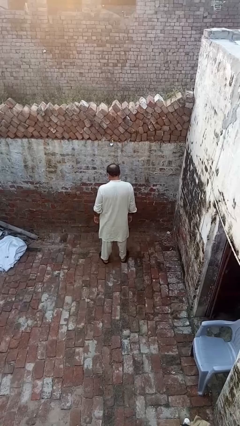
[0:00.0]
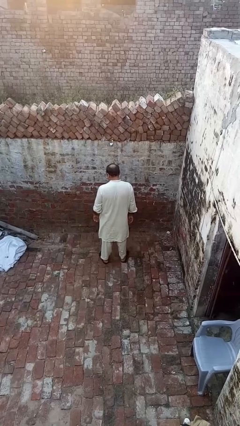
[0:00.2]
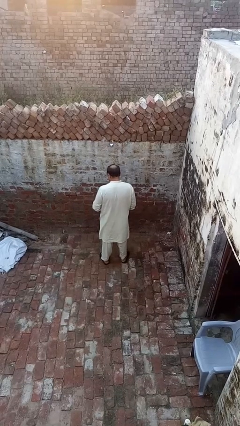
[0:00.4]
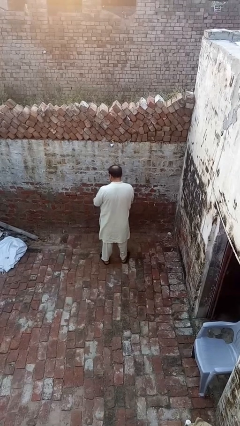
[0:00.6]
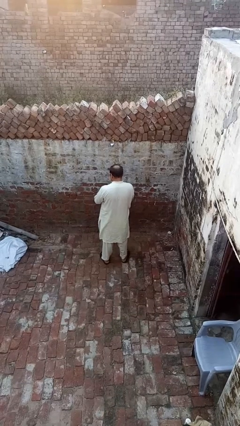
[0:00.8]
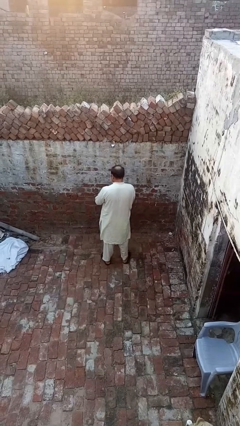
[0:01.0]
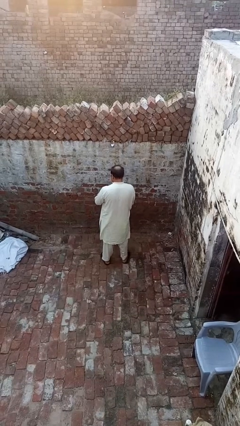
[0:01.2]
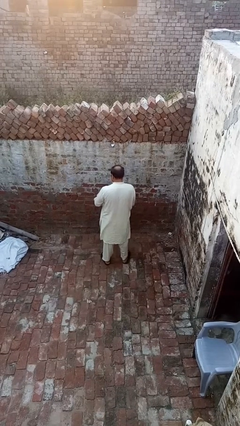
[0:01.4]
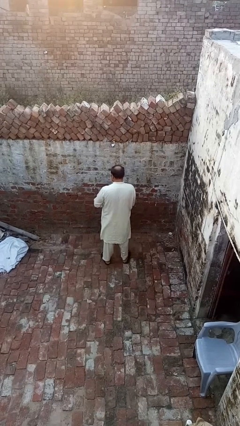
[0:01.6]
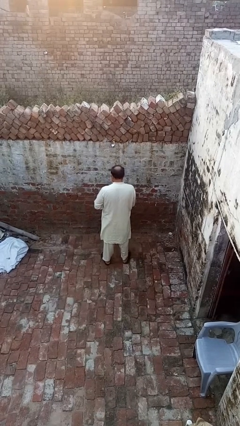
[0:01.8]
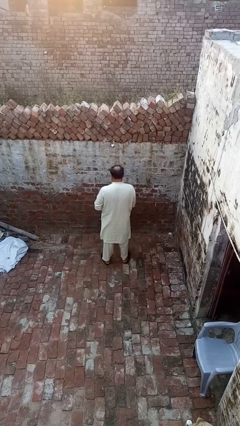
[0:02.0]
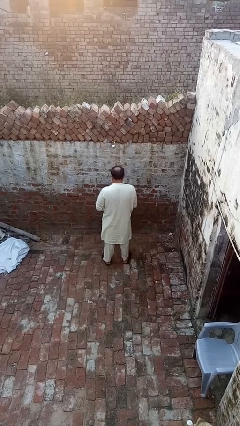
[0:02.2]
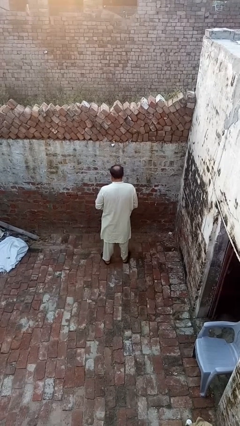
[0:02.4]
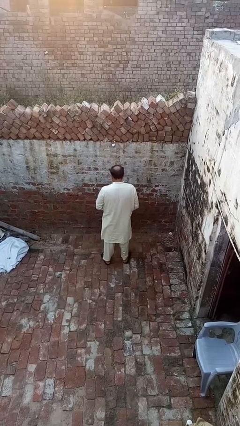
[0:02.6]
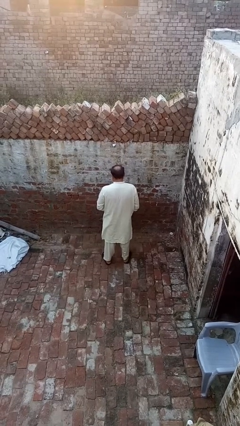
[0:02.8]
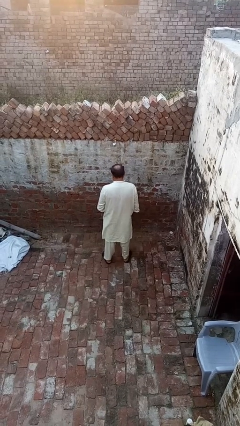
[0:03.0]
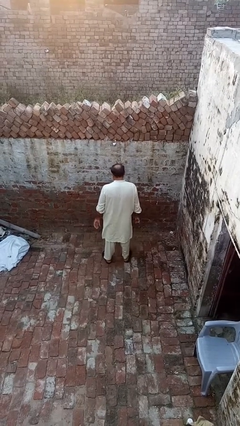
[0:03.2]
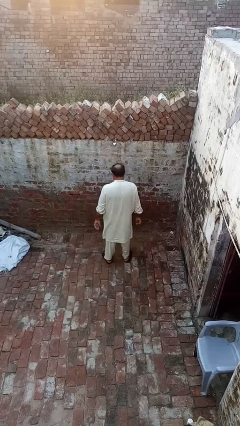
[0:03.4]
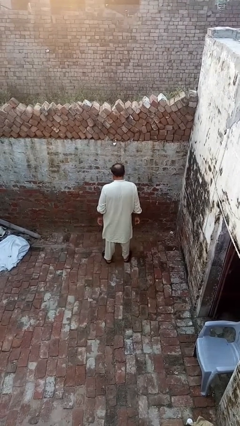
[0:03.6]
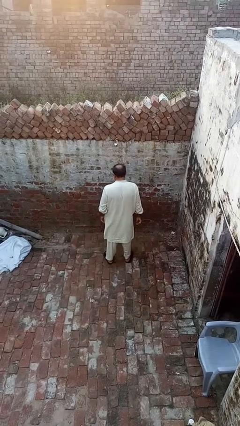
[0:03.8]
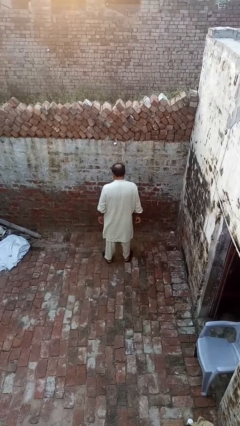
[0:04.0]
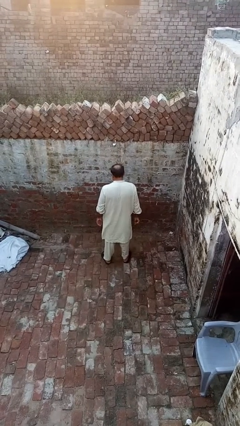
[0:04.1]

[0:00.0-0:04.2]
person takes off wristwatch

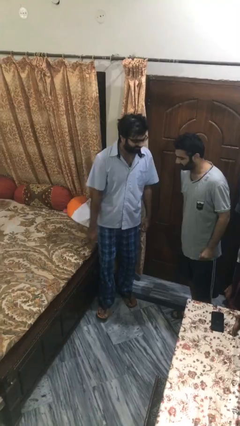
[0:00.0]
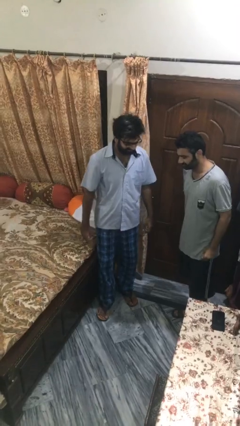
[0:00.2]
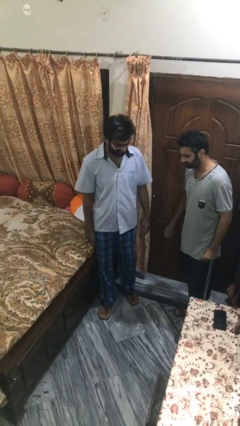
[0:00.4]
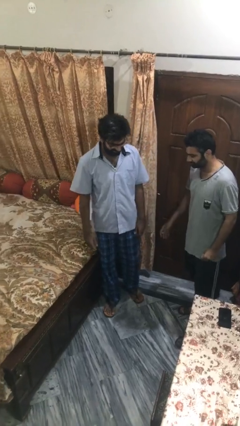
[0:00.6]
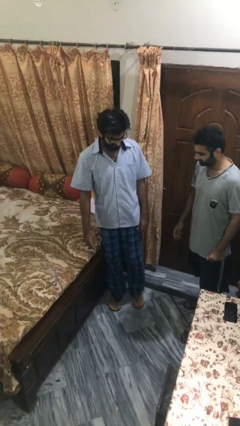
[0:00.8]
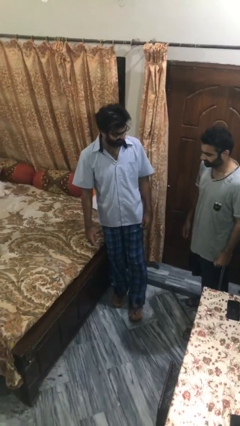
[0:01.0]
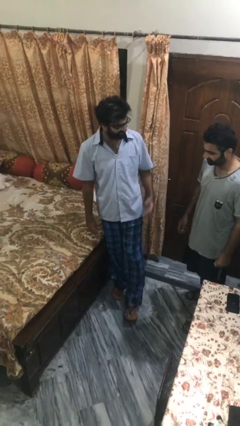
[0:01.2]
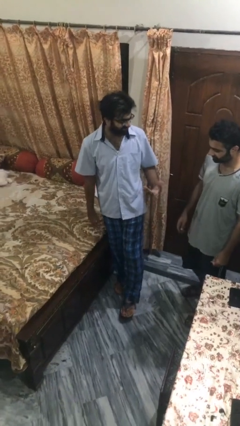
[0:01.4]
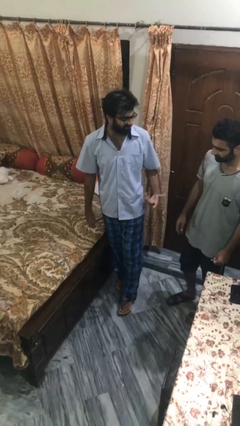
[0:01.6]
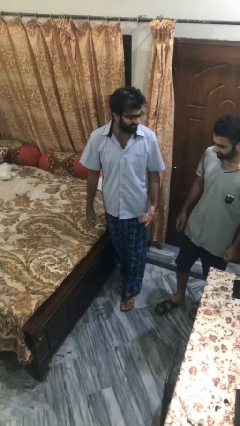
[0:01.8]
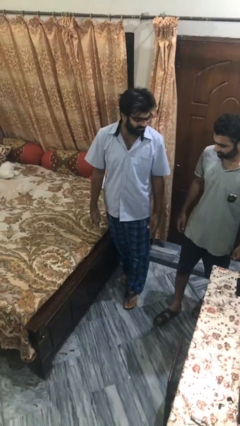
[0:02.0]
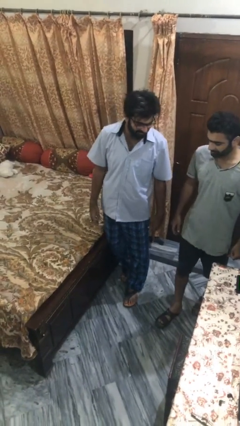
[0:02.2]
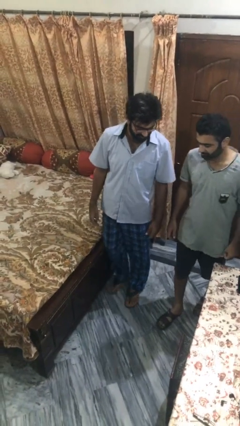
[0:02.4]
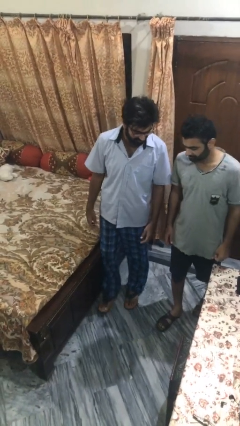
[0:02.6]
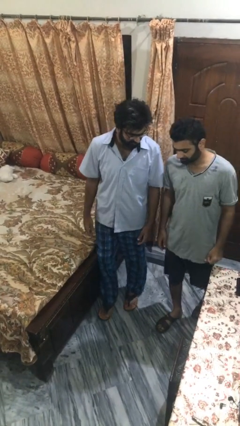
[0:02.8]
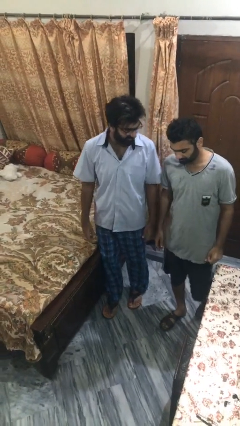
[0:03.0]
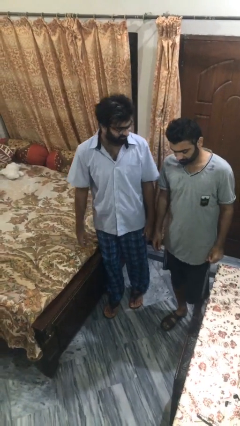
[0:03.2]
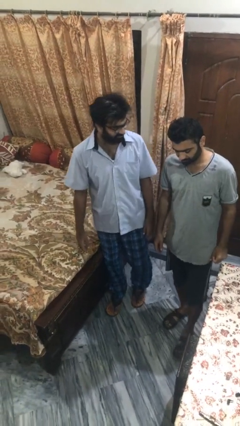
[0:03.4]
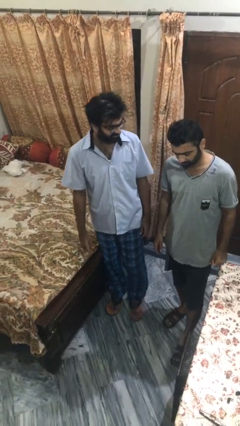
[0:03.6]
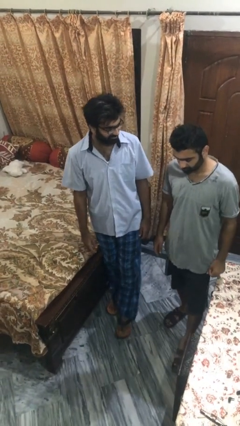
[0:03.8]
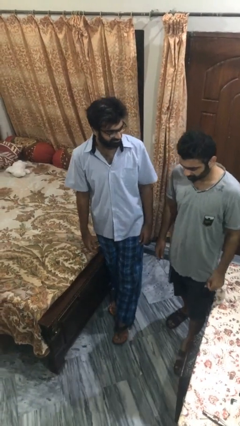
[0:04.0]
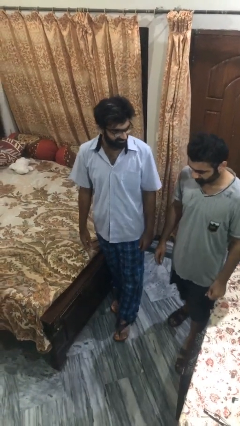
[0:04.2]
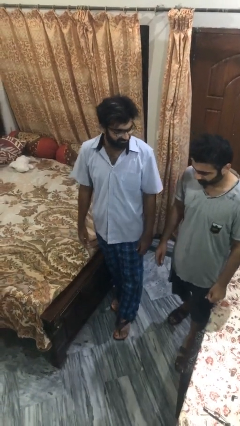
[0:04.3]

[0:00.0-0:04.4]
person talks to person

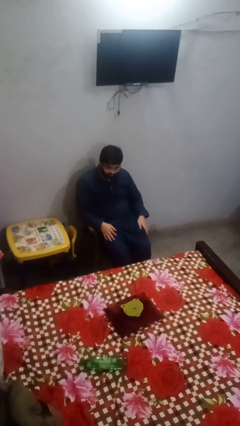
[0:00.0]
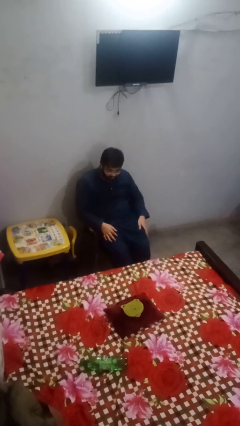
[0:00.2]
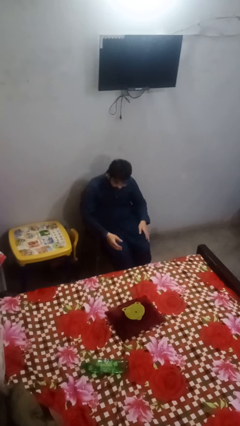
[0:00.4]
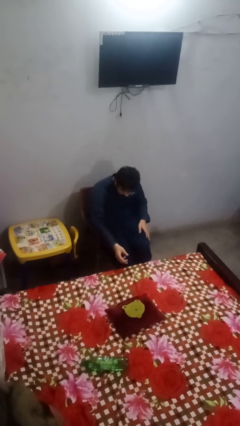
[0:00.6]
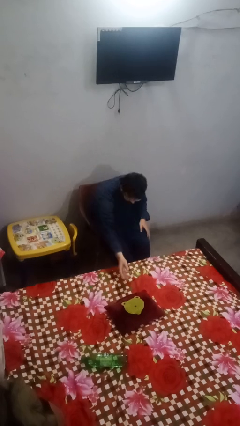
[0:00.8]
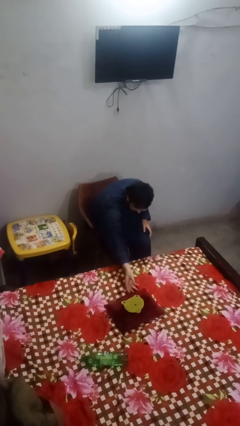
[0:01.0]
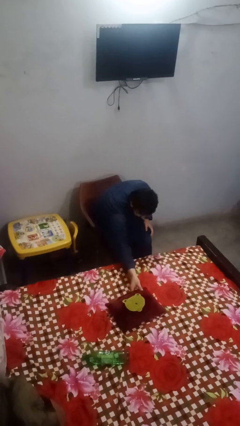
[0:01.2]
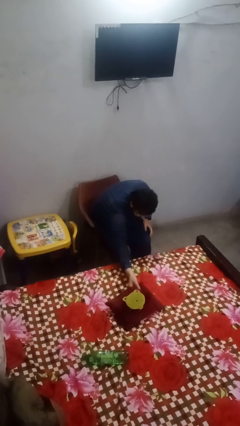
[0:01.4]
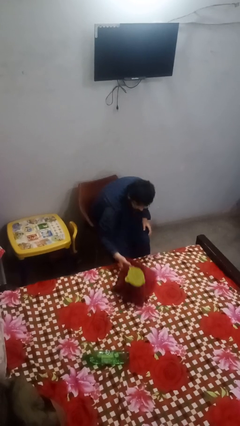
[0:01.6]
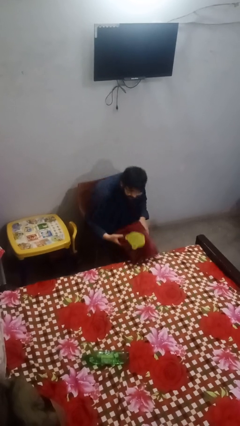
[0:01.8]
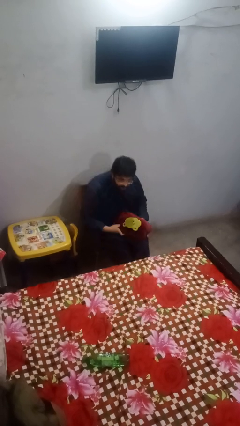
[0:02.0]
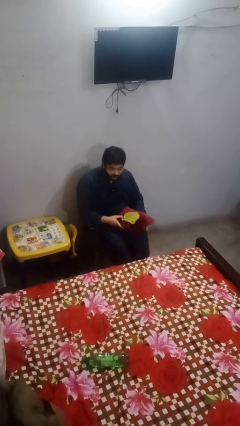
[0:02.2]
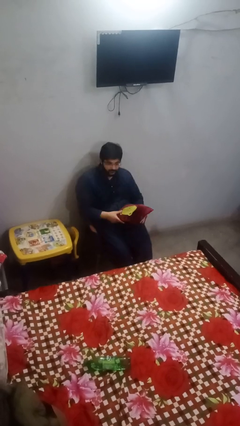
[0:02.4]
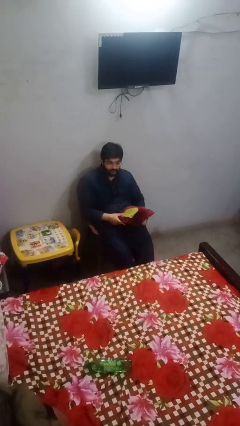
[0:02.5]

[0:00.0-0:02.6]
person picks up object from bed

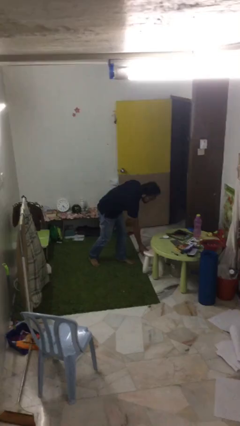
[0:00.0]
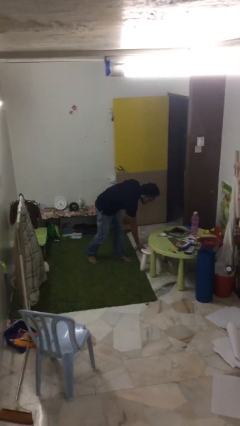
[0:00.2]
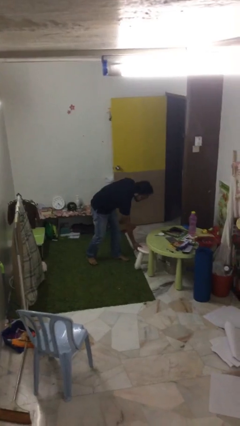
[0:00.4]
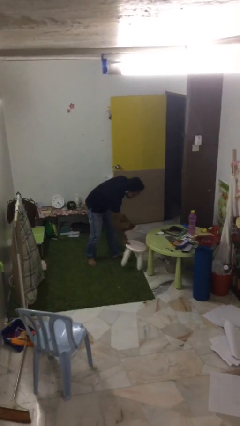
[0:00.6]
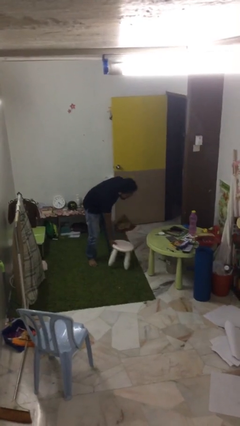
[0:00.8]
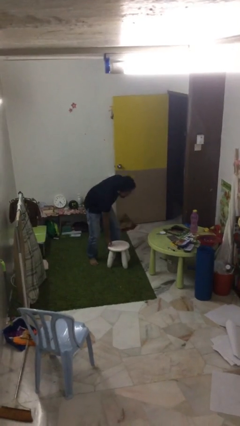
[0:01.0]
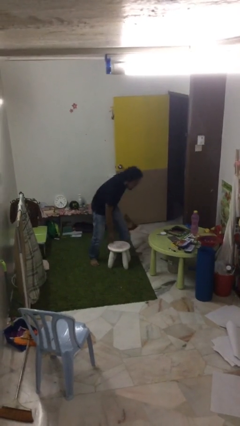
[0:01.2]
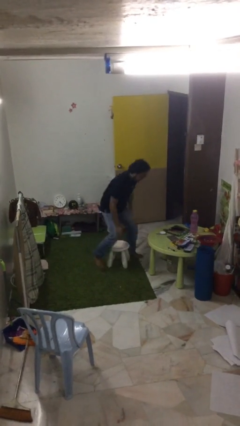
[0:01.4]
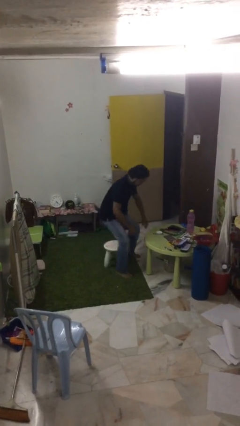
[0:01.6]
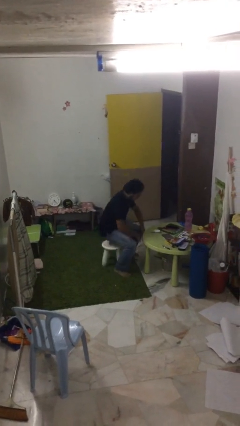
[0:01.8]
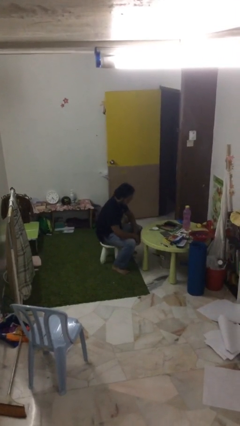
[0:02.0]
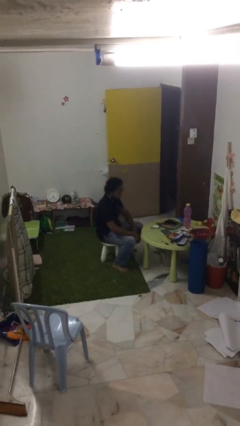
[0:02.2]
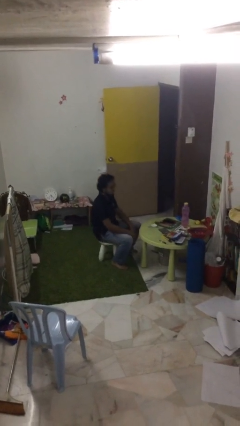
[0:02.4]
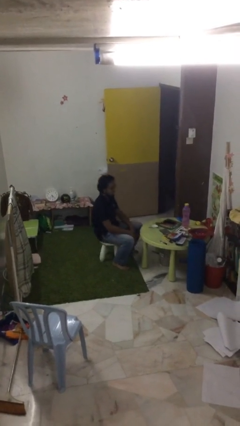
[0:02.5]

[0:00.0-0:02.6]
person sits down

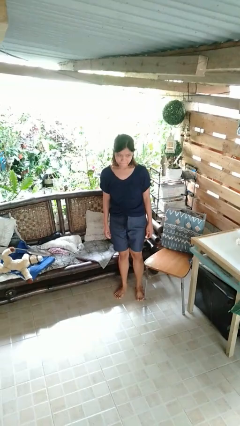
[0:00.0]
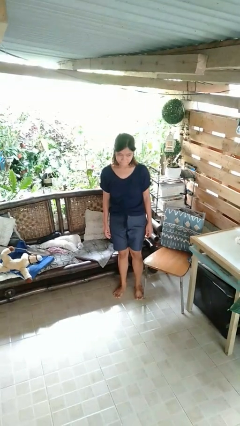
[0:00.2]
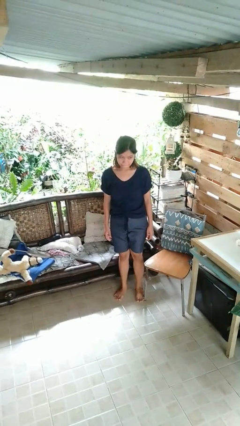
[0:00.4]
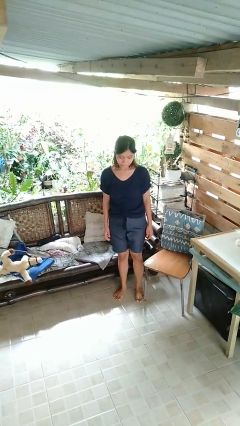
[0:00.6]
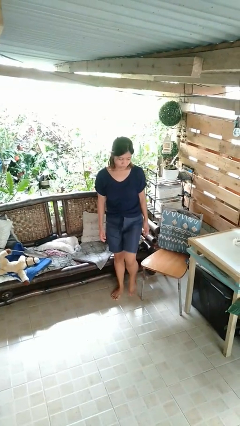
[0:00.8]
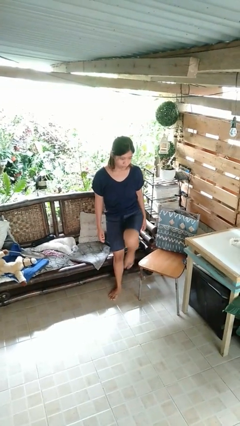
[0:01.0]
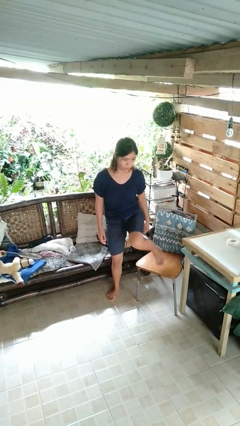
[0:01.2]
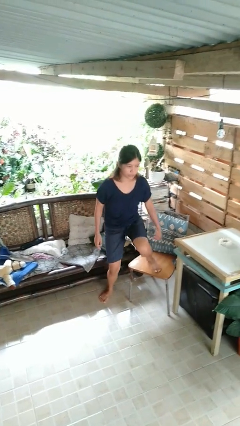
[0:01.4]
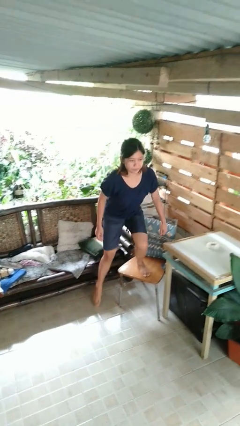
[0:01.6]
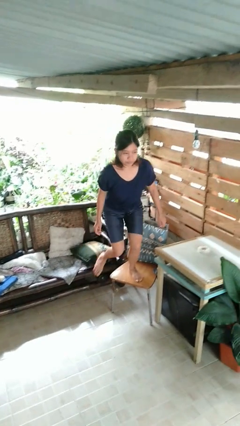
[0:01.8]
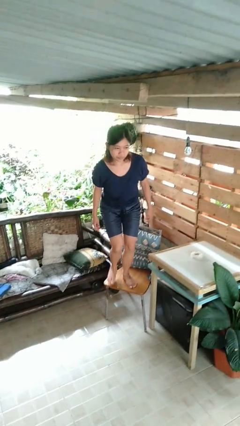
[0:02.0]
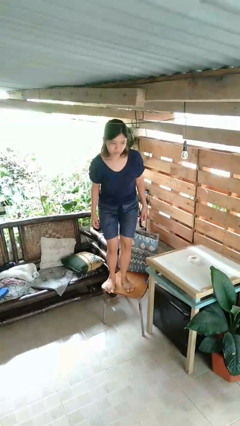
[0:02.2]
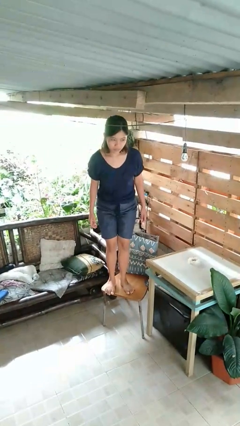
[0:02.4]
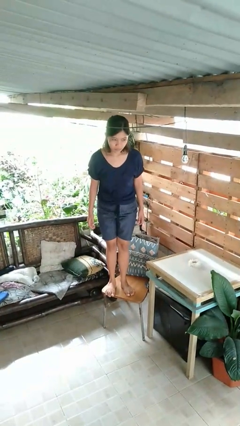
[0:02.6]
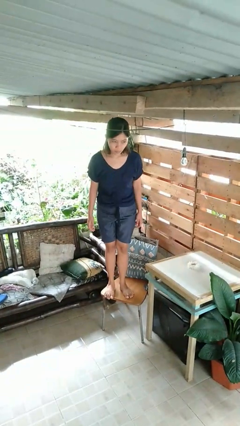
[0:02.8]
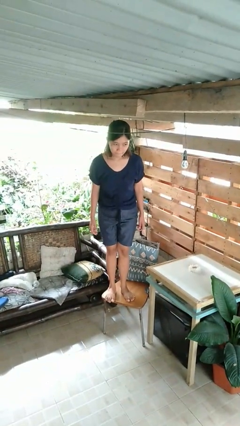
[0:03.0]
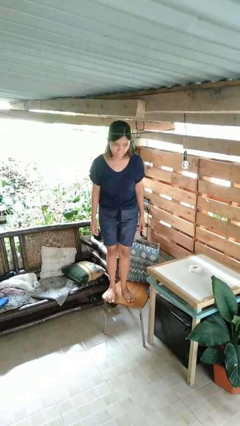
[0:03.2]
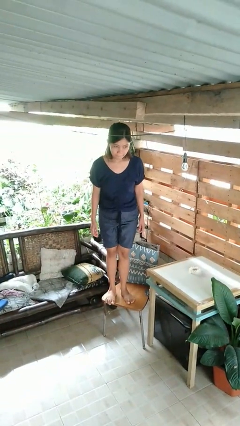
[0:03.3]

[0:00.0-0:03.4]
person climbs on chair

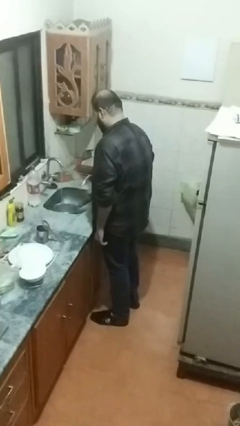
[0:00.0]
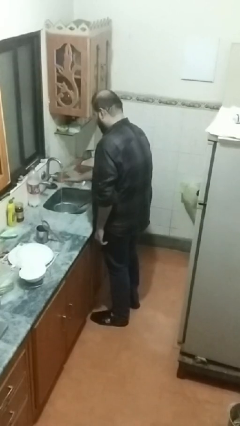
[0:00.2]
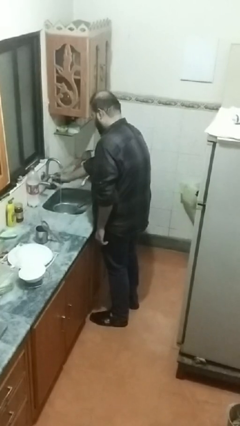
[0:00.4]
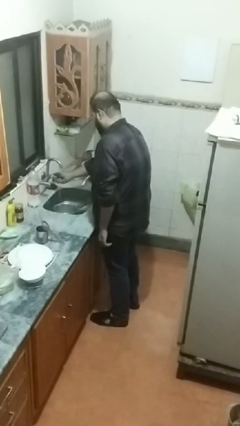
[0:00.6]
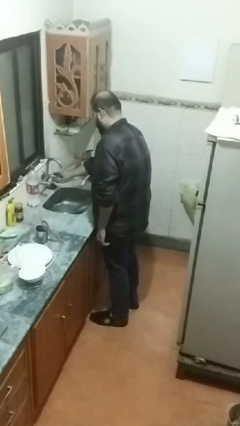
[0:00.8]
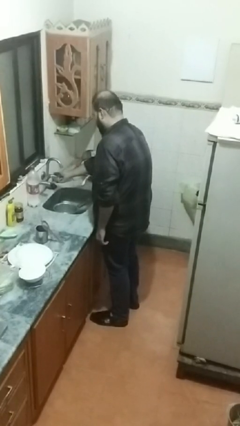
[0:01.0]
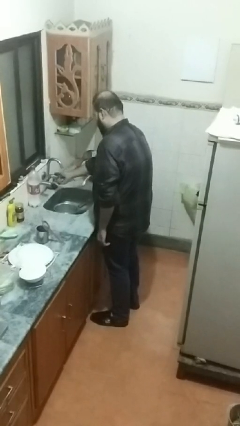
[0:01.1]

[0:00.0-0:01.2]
person turns off faucet
